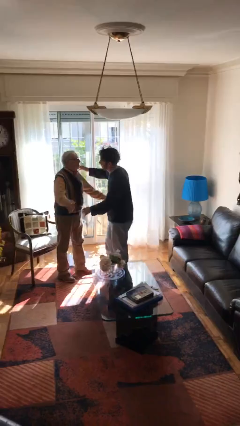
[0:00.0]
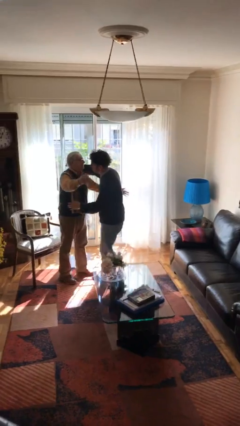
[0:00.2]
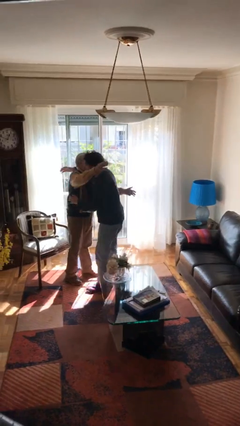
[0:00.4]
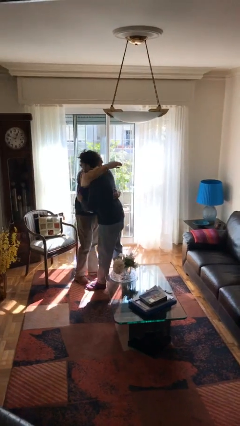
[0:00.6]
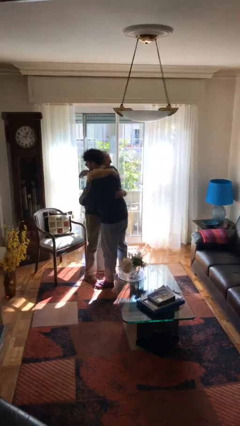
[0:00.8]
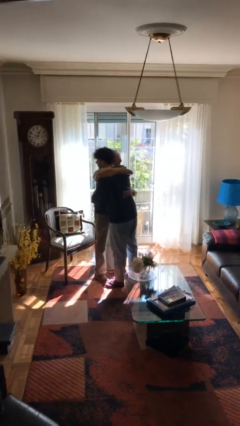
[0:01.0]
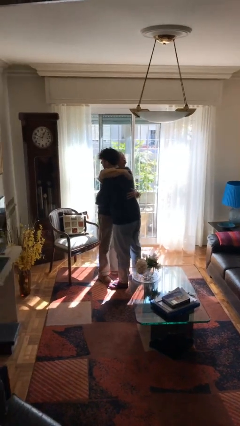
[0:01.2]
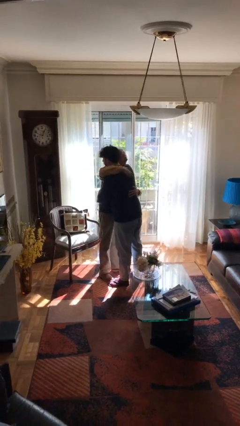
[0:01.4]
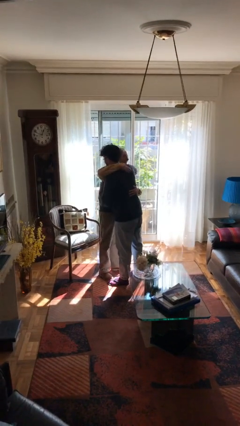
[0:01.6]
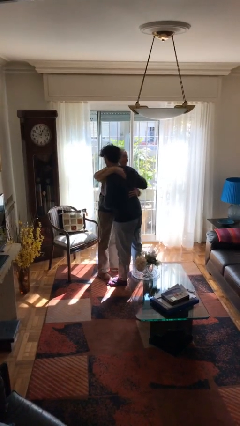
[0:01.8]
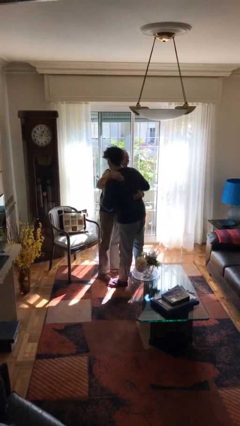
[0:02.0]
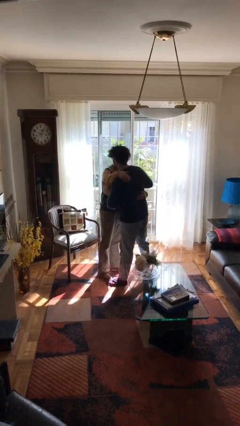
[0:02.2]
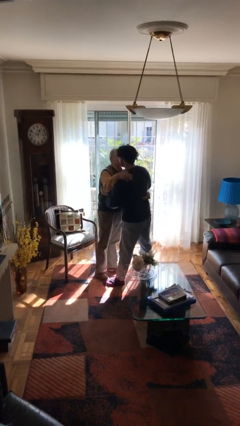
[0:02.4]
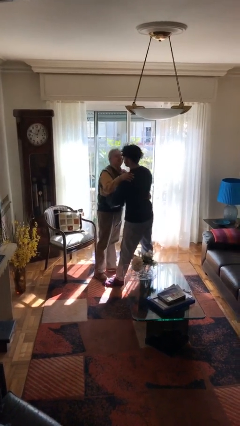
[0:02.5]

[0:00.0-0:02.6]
person embraces person

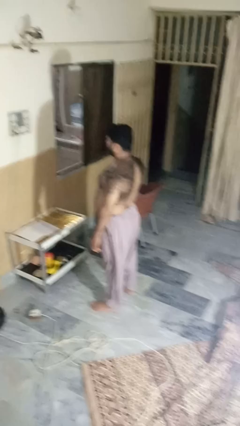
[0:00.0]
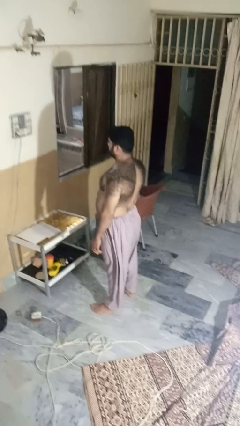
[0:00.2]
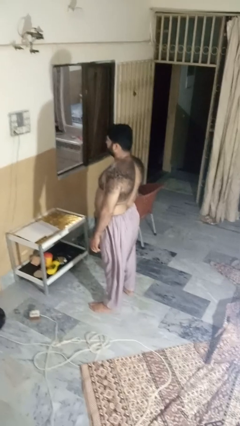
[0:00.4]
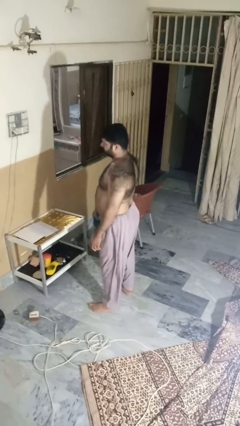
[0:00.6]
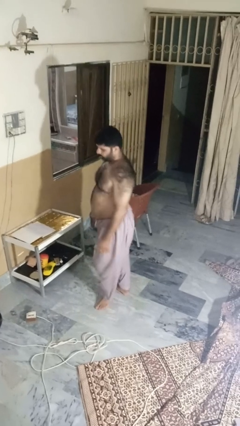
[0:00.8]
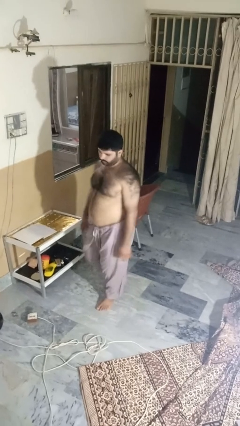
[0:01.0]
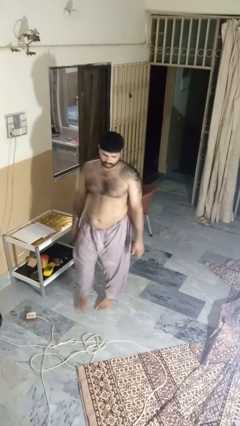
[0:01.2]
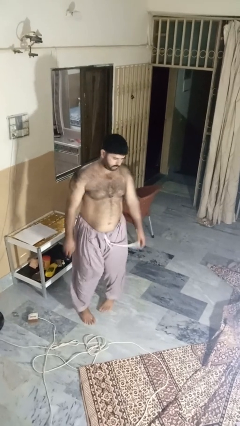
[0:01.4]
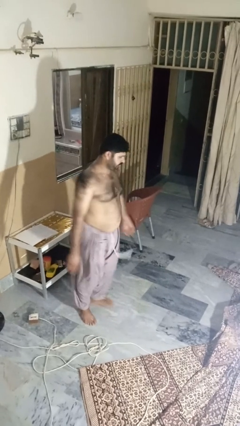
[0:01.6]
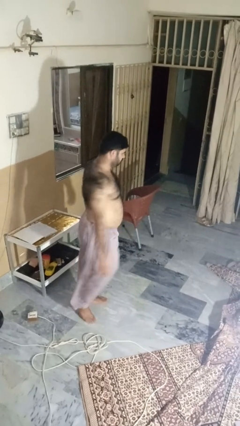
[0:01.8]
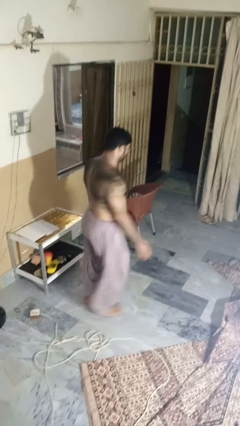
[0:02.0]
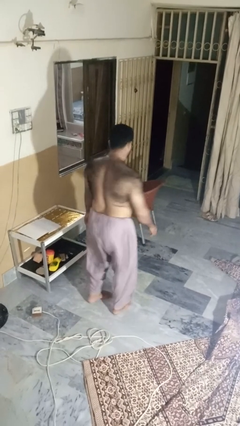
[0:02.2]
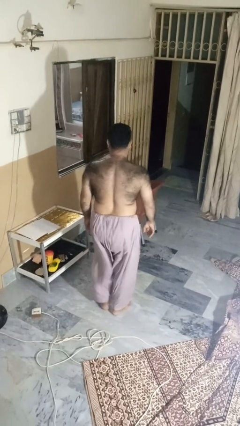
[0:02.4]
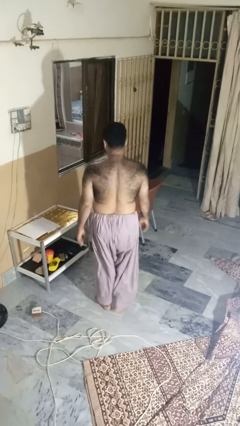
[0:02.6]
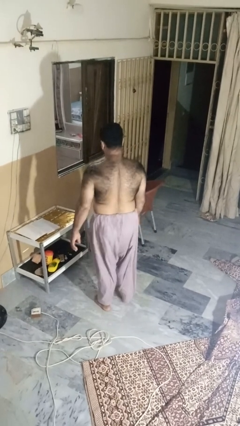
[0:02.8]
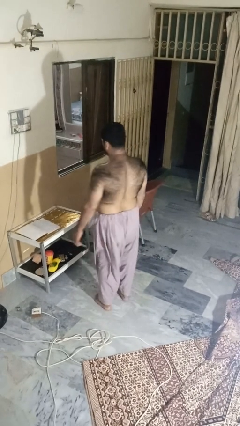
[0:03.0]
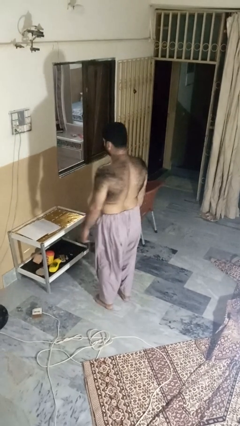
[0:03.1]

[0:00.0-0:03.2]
person twirls

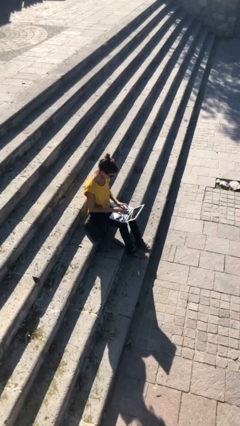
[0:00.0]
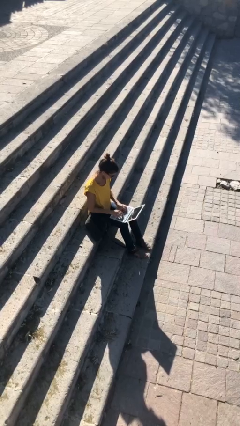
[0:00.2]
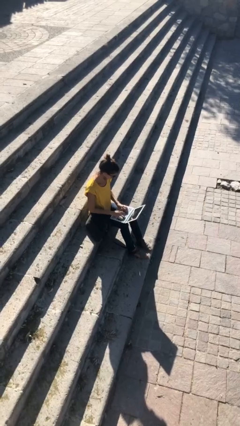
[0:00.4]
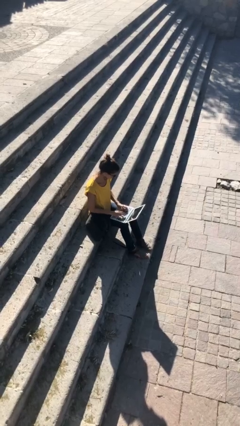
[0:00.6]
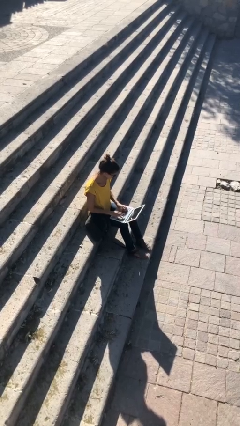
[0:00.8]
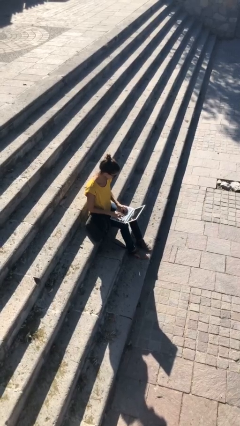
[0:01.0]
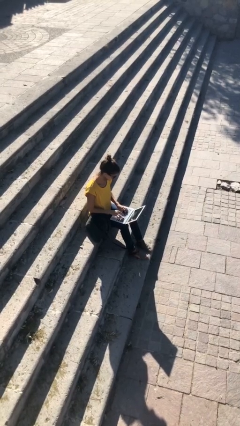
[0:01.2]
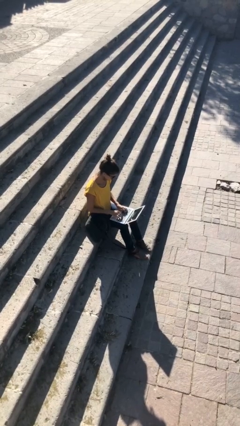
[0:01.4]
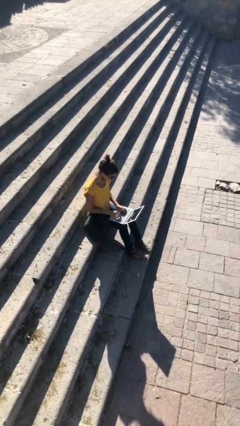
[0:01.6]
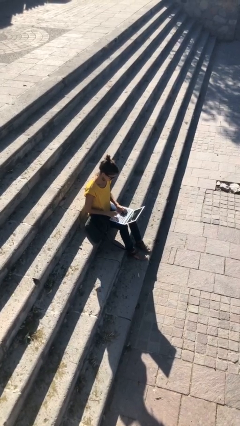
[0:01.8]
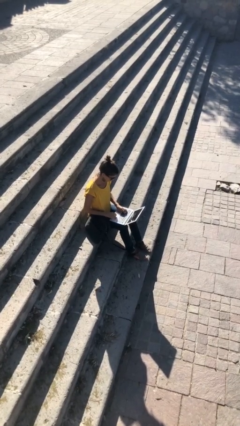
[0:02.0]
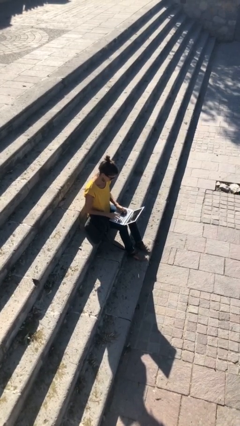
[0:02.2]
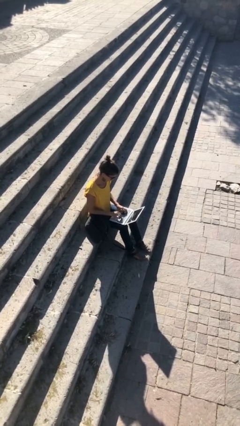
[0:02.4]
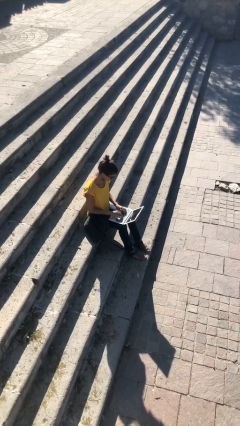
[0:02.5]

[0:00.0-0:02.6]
person interacts with laptop

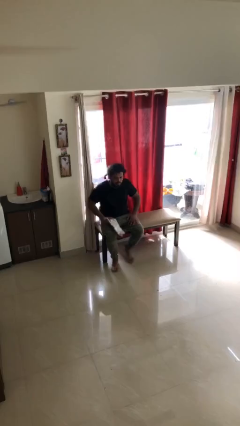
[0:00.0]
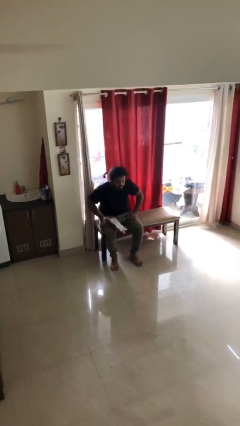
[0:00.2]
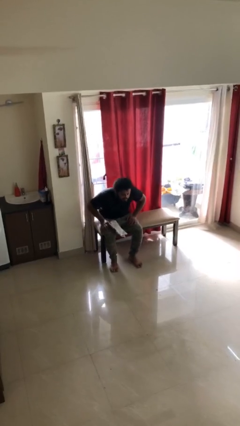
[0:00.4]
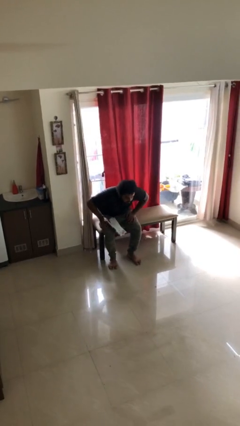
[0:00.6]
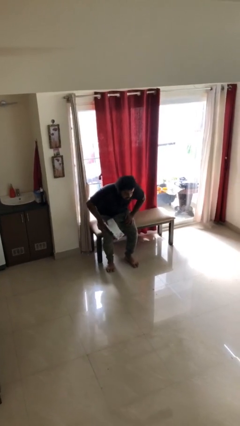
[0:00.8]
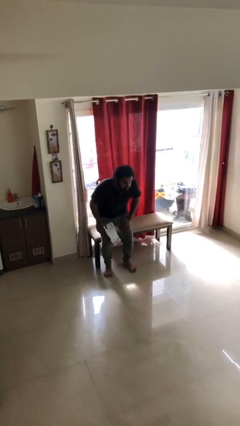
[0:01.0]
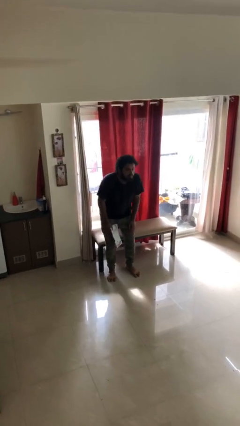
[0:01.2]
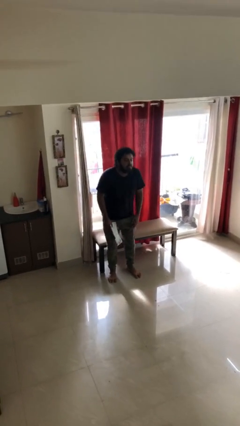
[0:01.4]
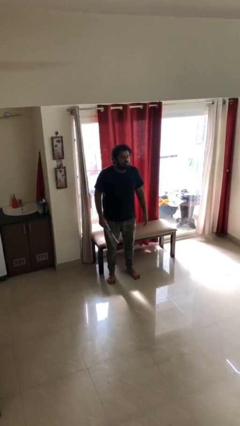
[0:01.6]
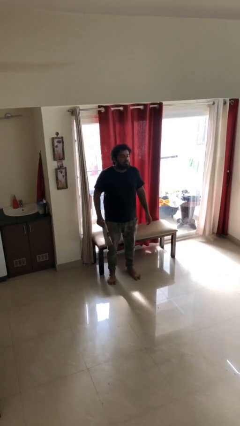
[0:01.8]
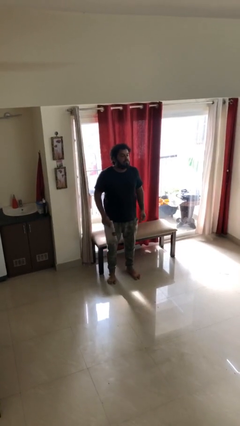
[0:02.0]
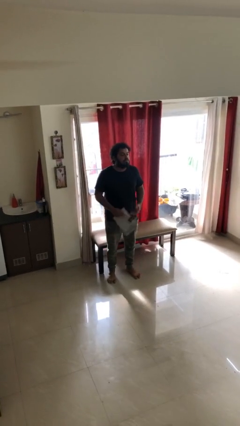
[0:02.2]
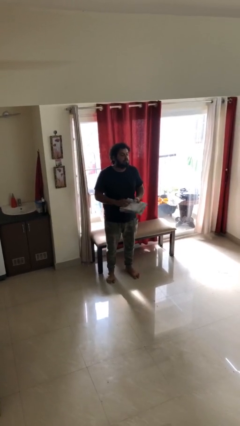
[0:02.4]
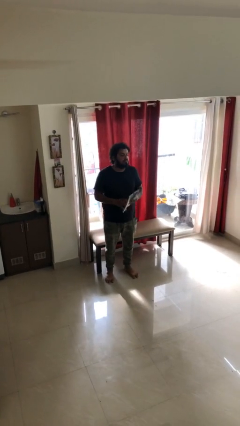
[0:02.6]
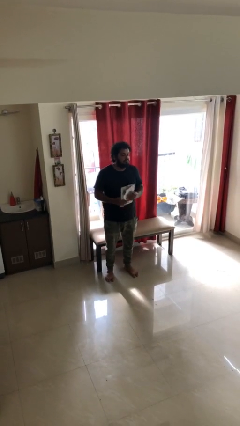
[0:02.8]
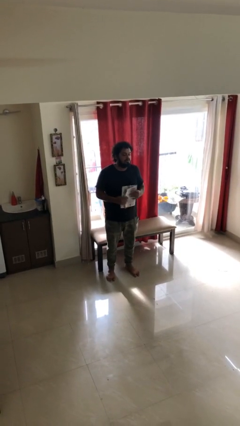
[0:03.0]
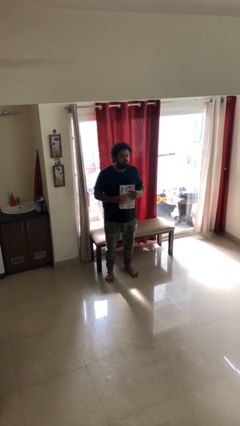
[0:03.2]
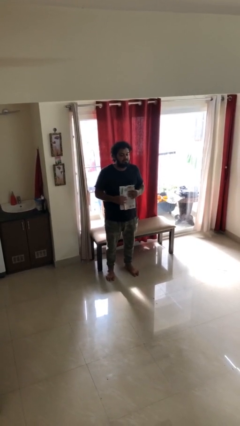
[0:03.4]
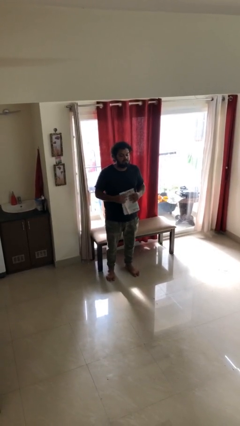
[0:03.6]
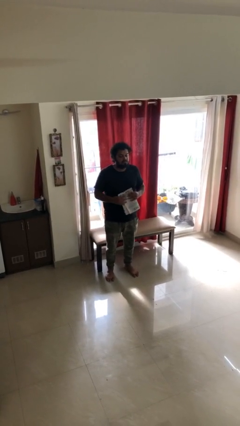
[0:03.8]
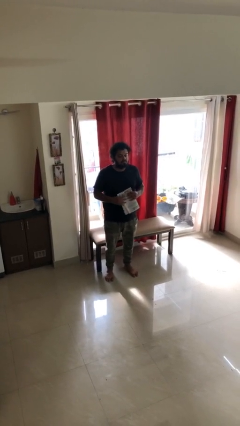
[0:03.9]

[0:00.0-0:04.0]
person stands up

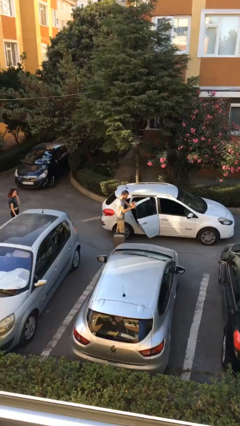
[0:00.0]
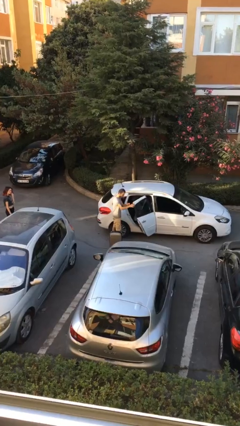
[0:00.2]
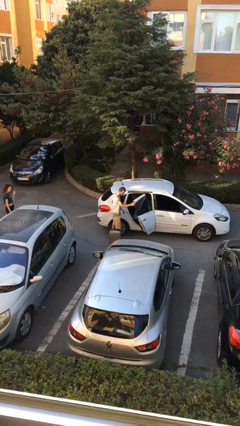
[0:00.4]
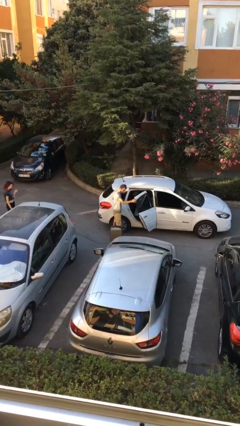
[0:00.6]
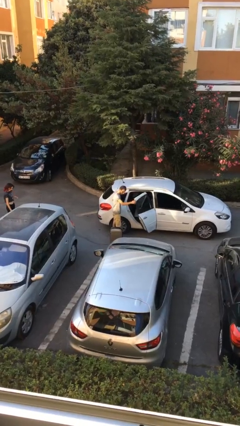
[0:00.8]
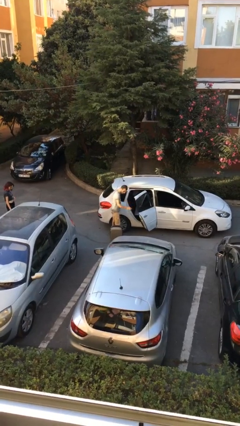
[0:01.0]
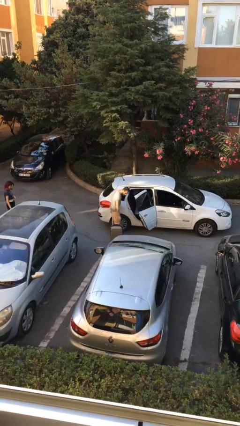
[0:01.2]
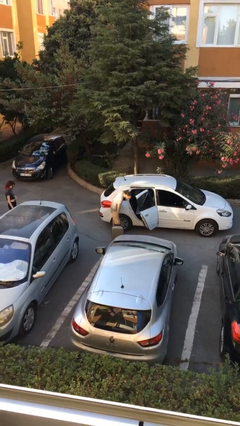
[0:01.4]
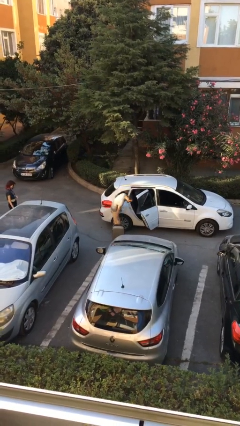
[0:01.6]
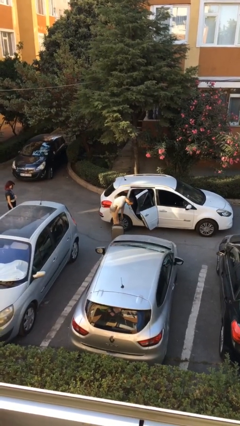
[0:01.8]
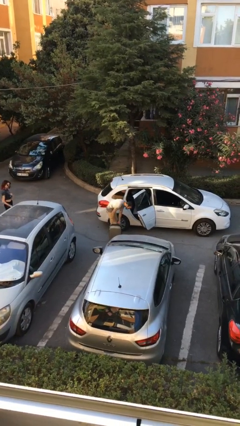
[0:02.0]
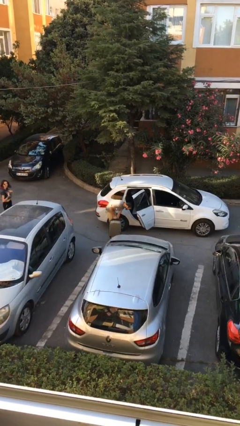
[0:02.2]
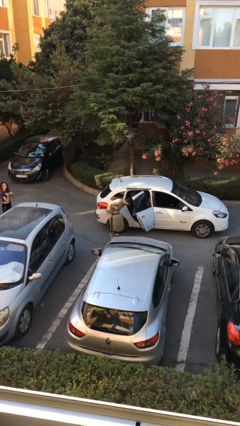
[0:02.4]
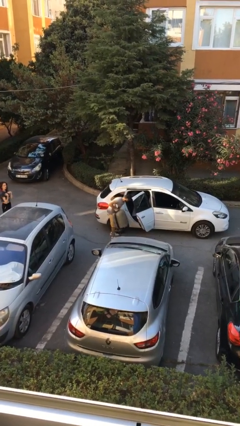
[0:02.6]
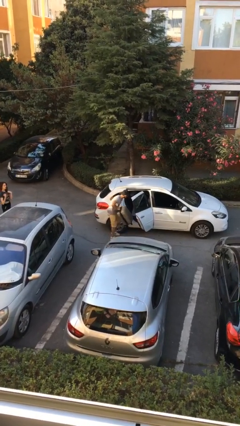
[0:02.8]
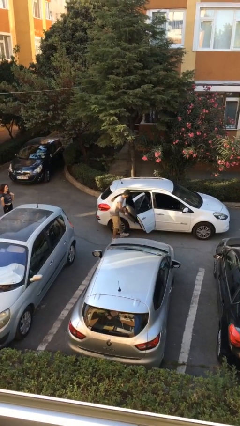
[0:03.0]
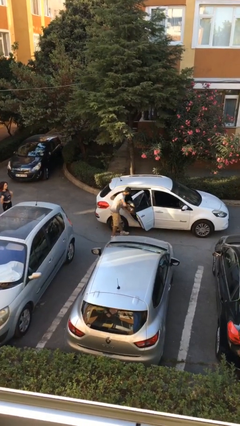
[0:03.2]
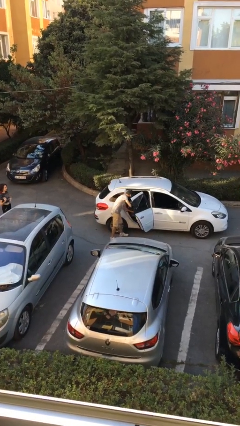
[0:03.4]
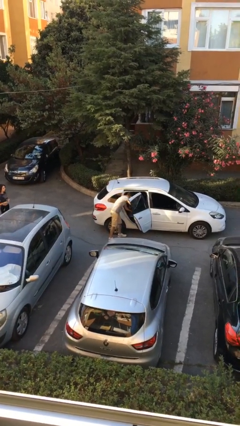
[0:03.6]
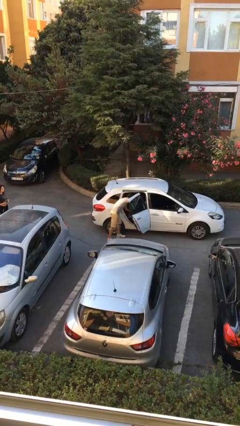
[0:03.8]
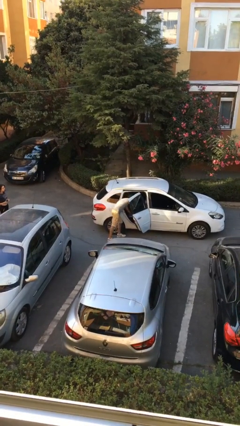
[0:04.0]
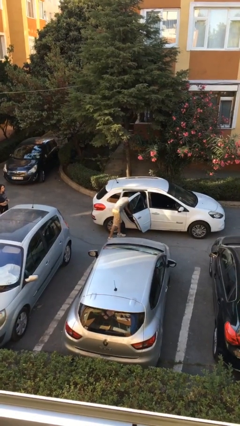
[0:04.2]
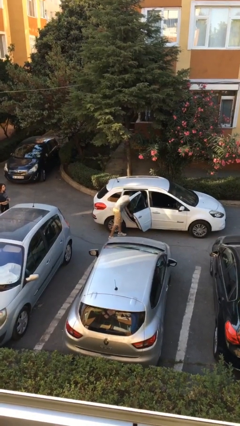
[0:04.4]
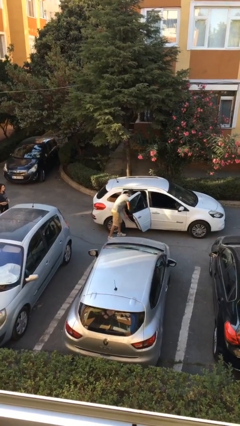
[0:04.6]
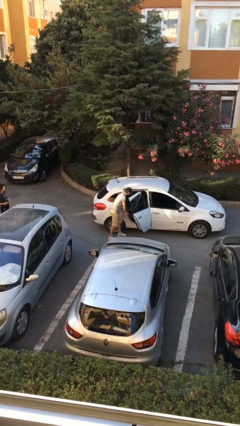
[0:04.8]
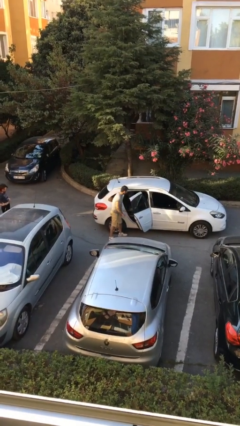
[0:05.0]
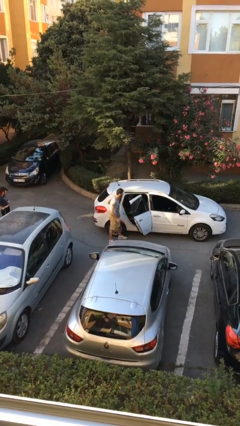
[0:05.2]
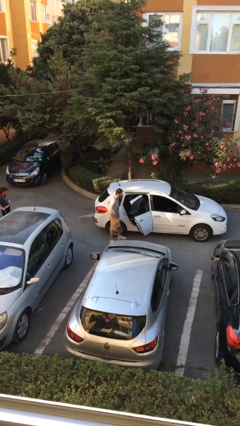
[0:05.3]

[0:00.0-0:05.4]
person loads car
